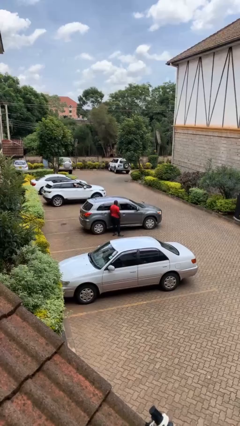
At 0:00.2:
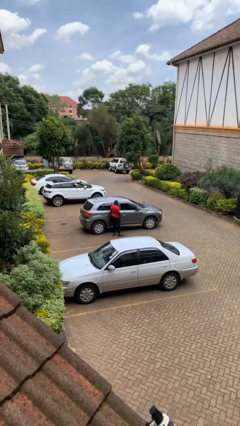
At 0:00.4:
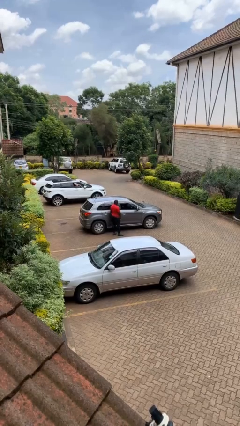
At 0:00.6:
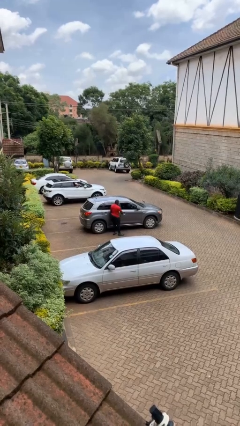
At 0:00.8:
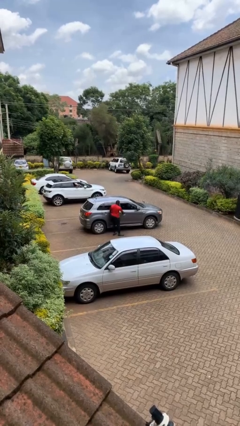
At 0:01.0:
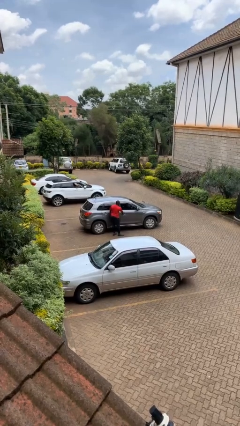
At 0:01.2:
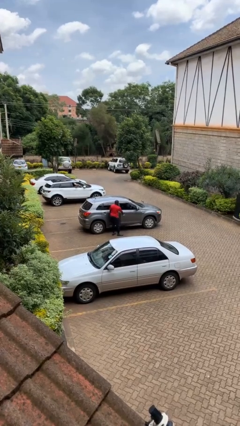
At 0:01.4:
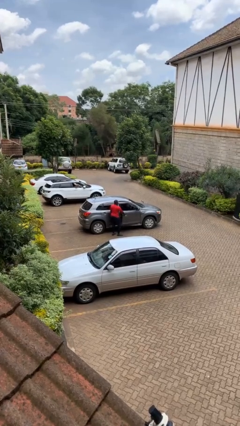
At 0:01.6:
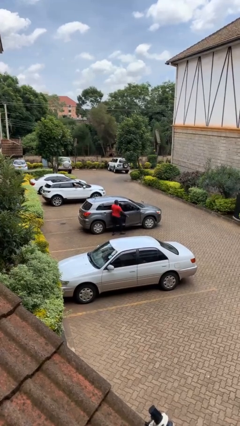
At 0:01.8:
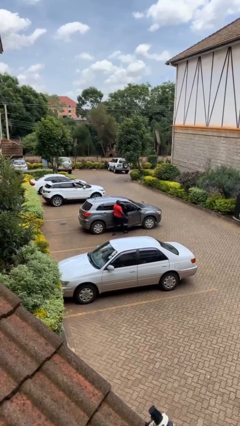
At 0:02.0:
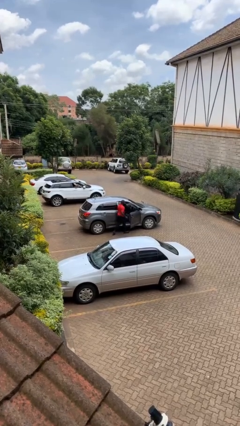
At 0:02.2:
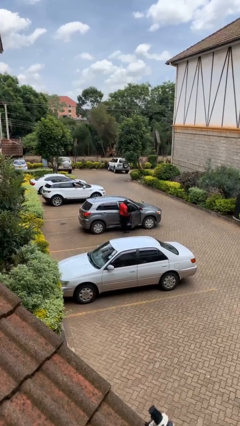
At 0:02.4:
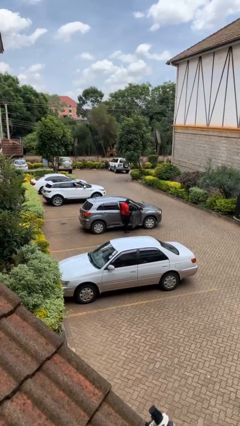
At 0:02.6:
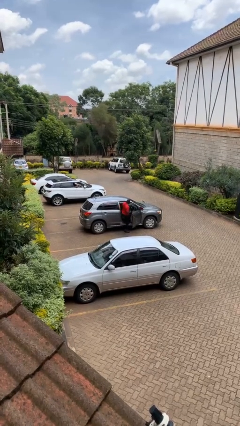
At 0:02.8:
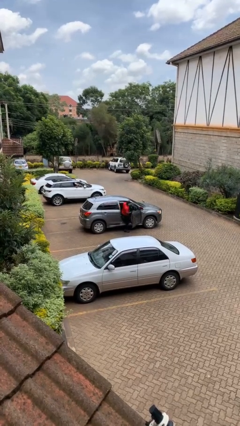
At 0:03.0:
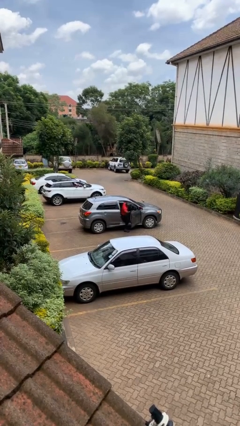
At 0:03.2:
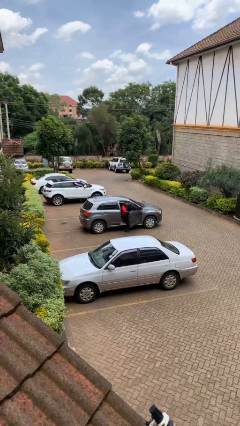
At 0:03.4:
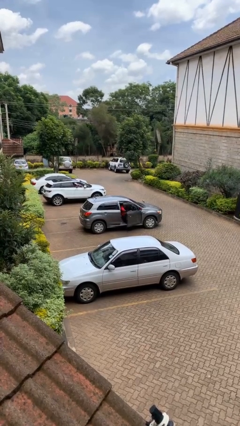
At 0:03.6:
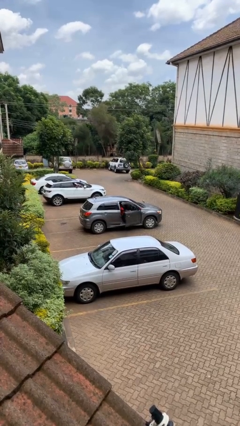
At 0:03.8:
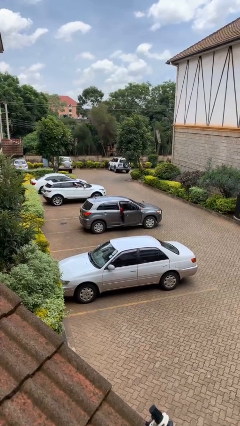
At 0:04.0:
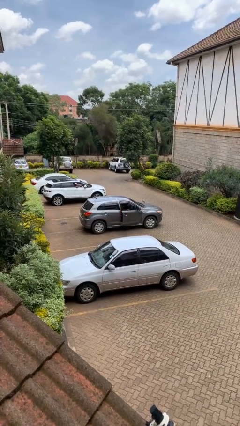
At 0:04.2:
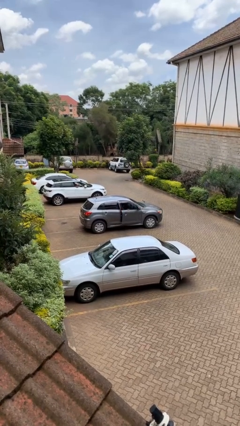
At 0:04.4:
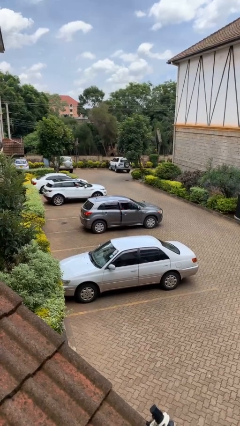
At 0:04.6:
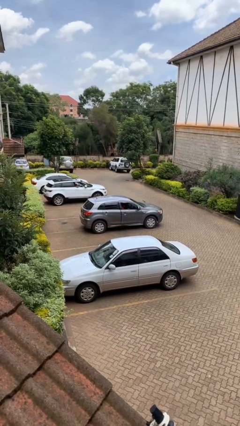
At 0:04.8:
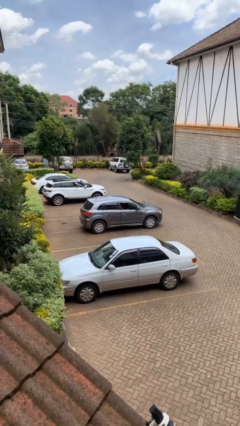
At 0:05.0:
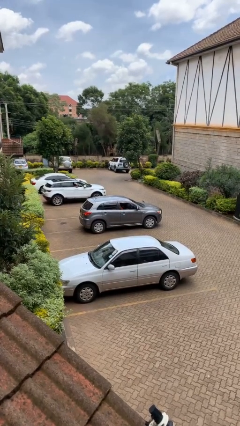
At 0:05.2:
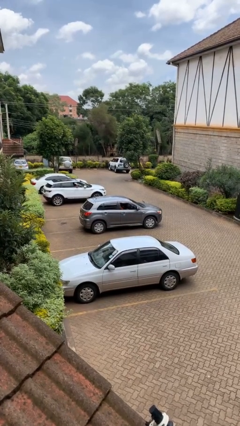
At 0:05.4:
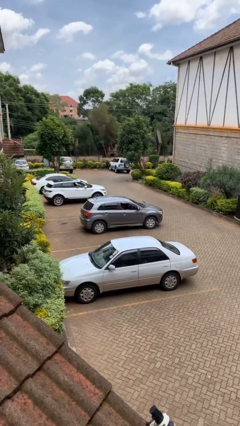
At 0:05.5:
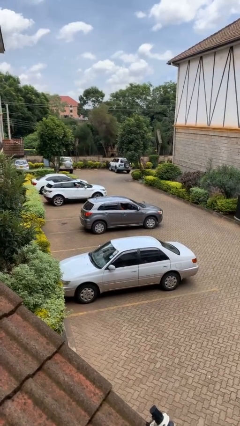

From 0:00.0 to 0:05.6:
car picks up person

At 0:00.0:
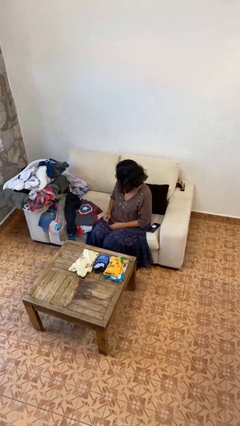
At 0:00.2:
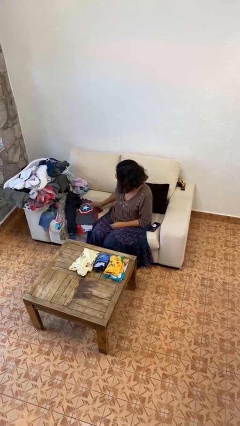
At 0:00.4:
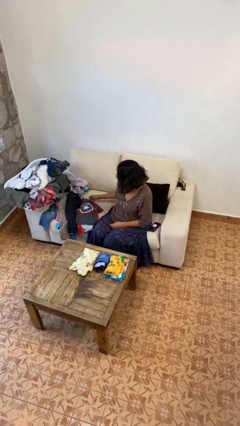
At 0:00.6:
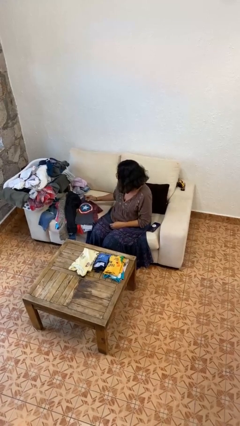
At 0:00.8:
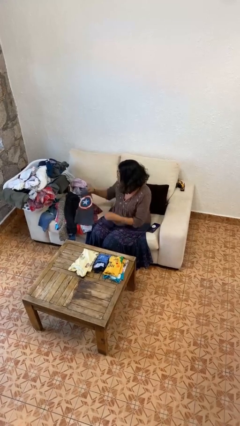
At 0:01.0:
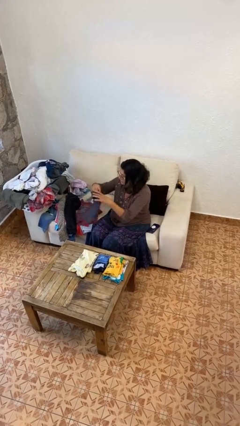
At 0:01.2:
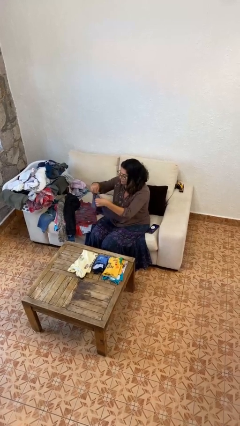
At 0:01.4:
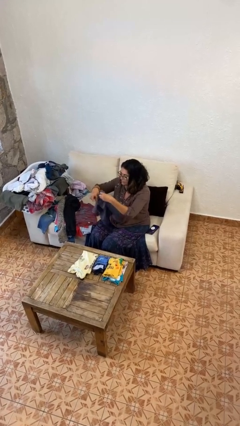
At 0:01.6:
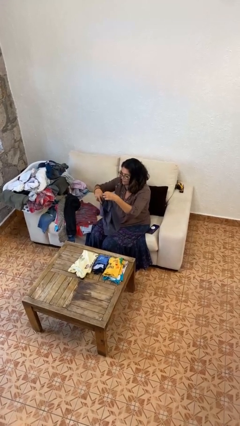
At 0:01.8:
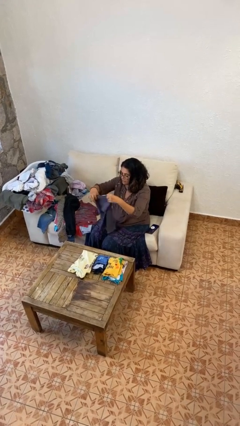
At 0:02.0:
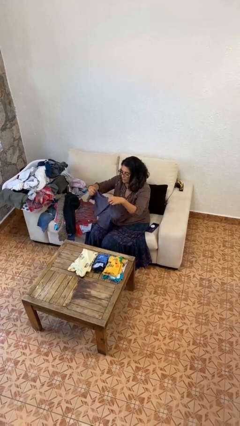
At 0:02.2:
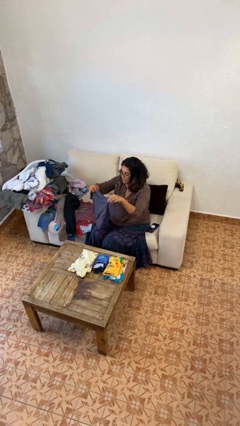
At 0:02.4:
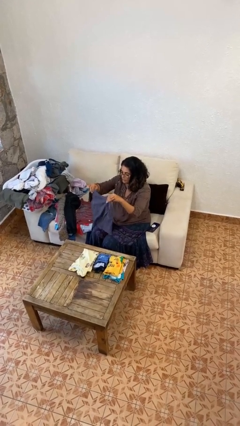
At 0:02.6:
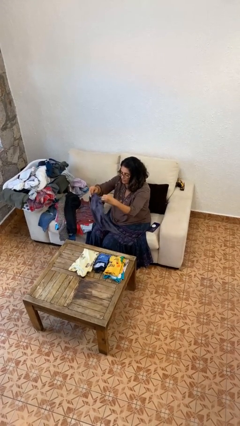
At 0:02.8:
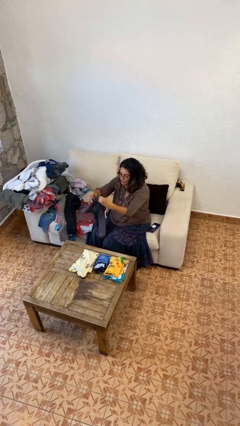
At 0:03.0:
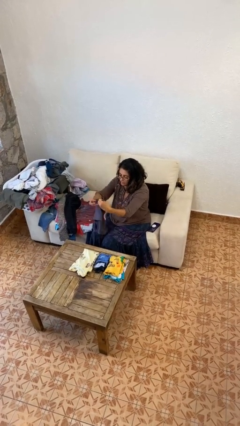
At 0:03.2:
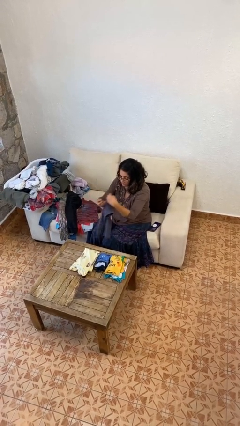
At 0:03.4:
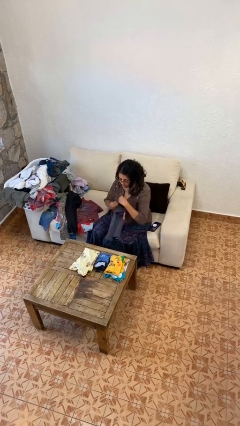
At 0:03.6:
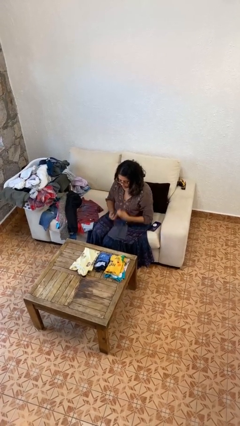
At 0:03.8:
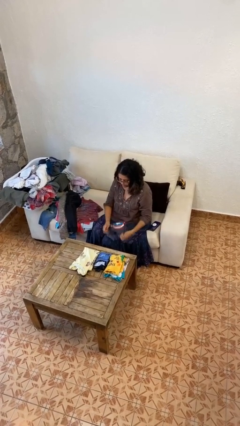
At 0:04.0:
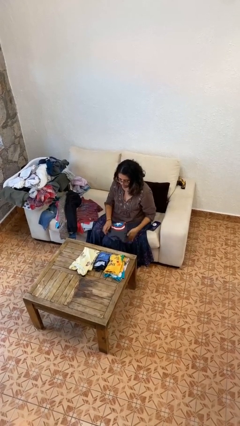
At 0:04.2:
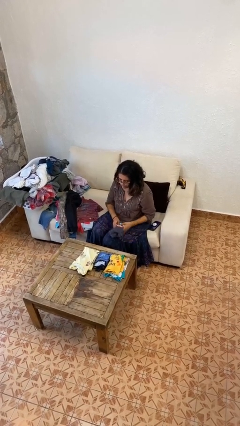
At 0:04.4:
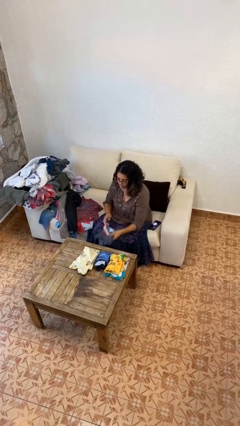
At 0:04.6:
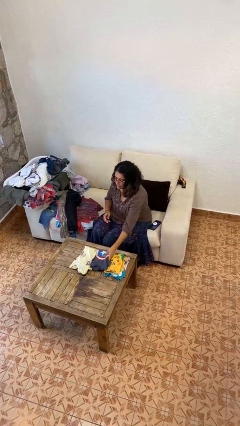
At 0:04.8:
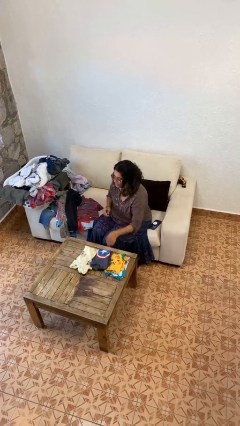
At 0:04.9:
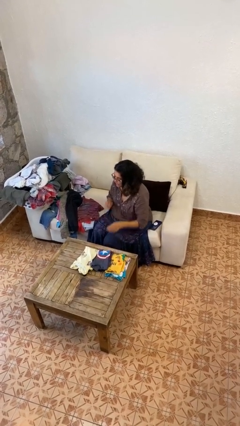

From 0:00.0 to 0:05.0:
person folds shirt

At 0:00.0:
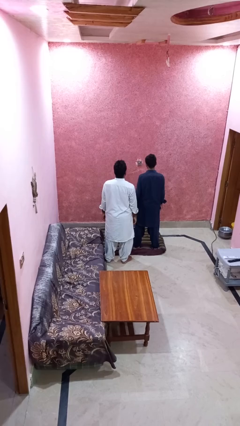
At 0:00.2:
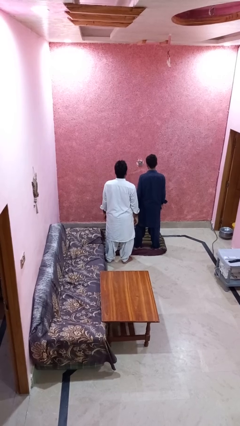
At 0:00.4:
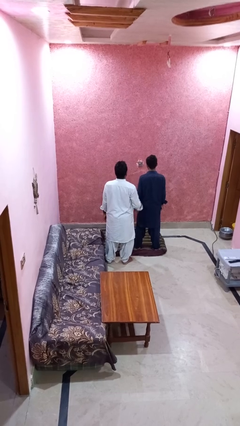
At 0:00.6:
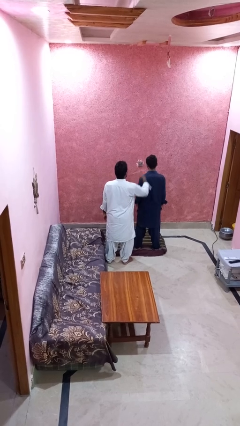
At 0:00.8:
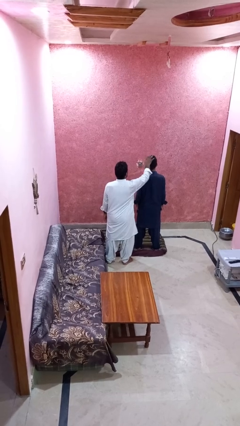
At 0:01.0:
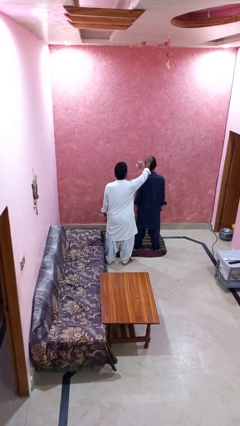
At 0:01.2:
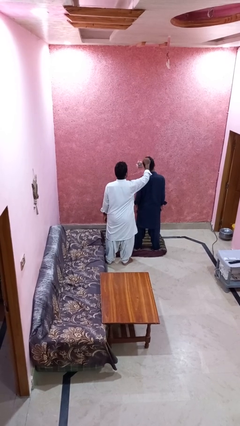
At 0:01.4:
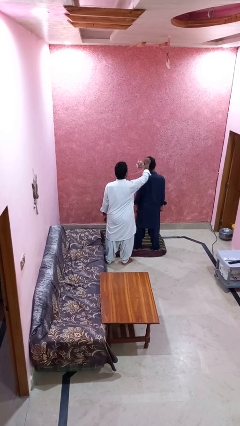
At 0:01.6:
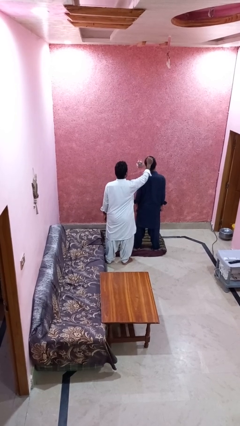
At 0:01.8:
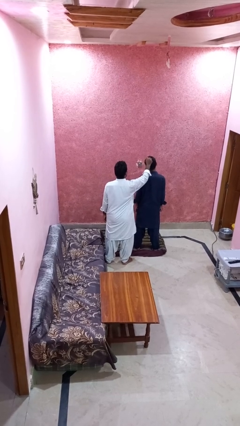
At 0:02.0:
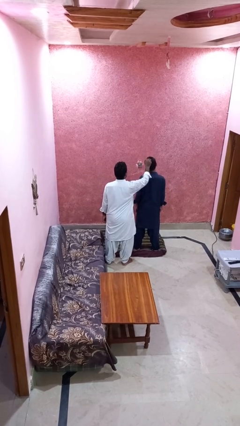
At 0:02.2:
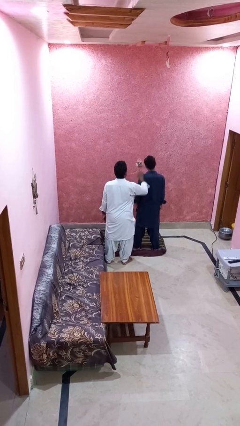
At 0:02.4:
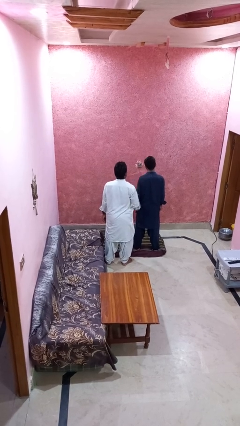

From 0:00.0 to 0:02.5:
person grabs person by hair

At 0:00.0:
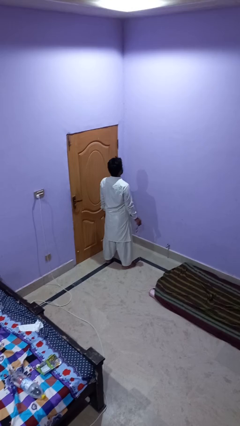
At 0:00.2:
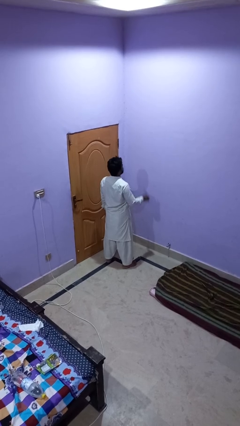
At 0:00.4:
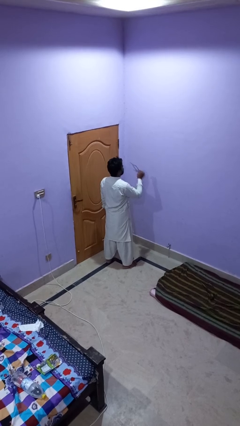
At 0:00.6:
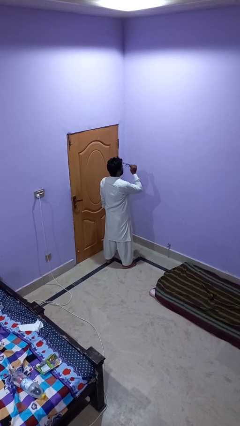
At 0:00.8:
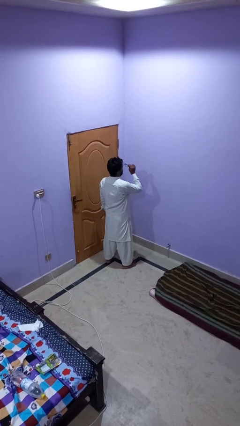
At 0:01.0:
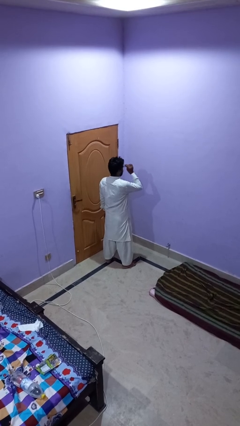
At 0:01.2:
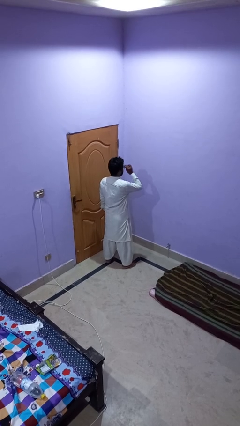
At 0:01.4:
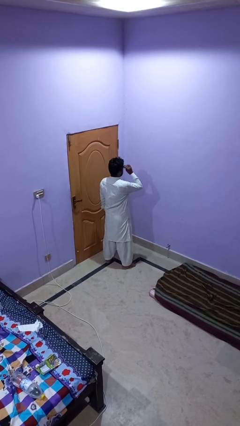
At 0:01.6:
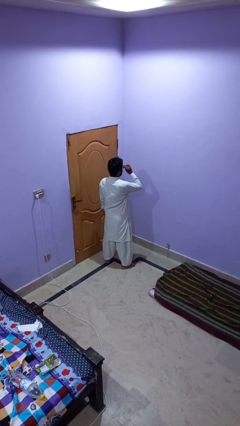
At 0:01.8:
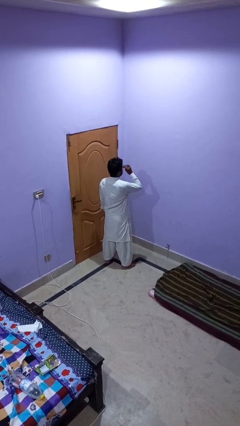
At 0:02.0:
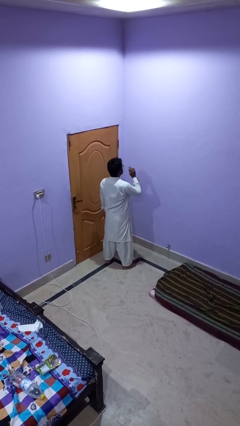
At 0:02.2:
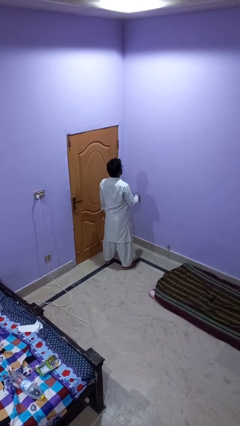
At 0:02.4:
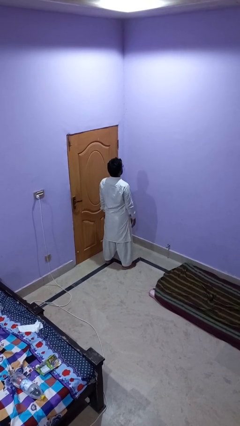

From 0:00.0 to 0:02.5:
person puts on glasses

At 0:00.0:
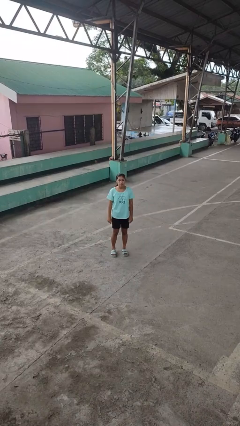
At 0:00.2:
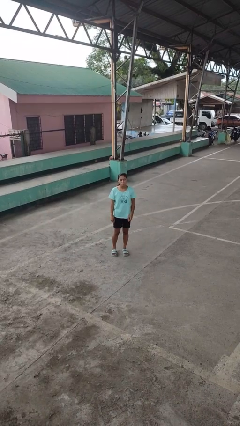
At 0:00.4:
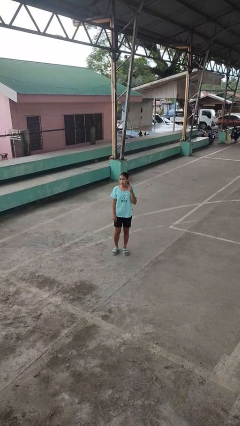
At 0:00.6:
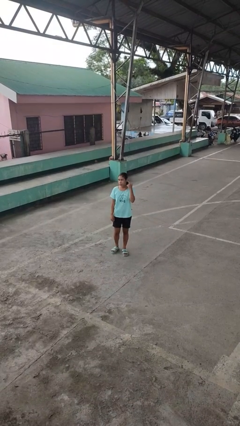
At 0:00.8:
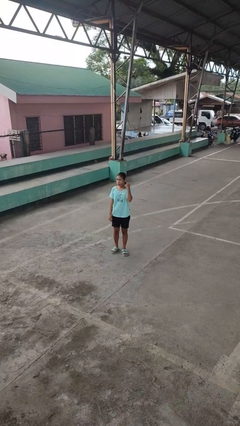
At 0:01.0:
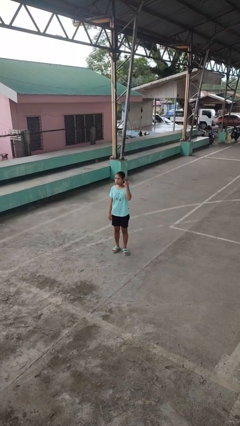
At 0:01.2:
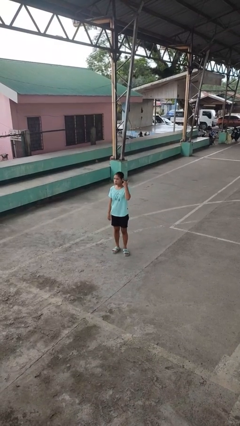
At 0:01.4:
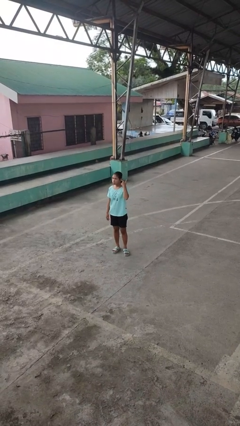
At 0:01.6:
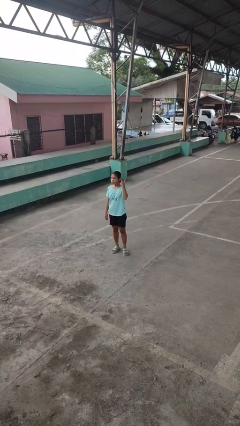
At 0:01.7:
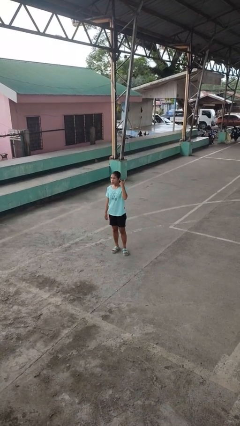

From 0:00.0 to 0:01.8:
person gestures listen closely
